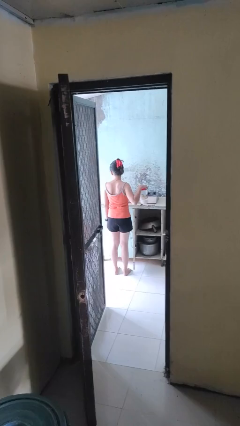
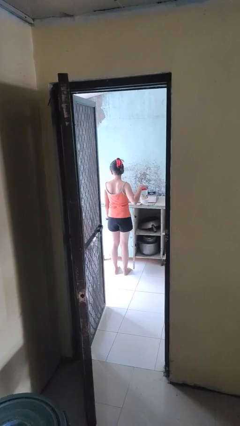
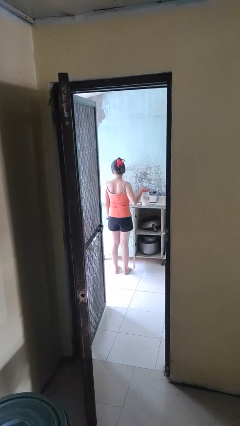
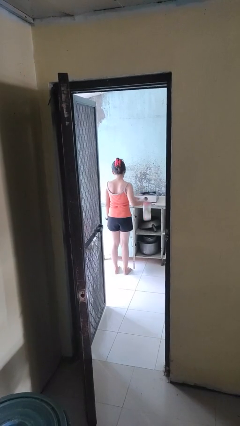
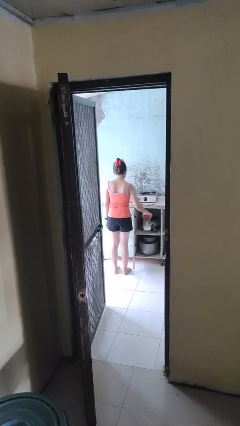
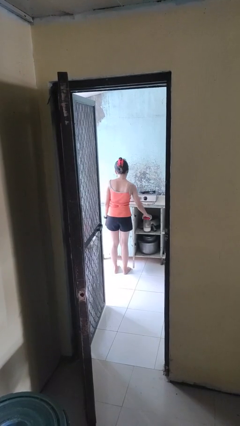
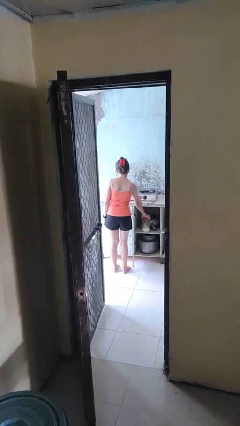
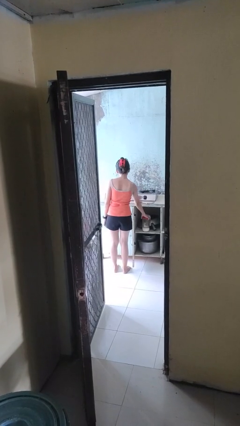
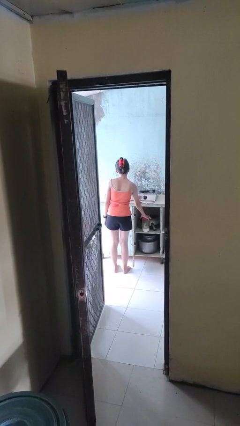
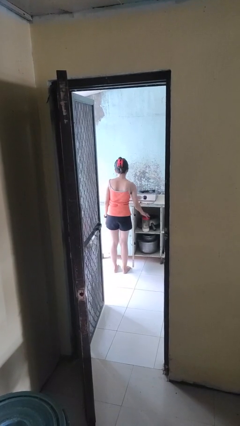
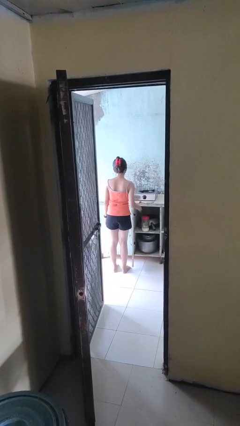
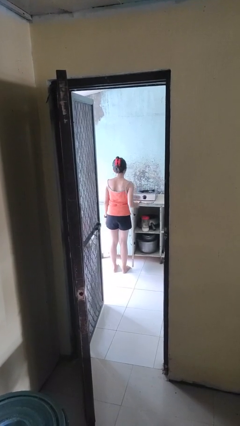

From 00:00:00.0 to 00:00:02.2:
person puts down object into cabinet

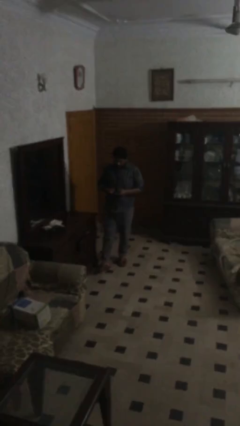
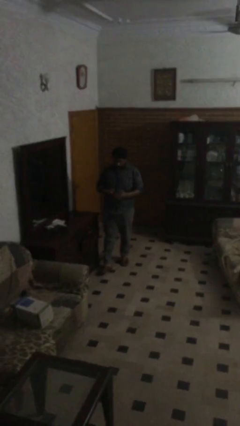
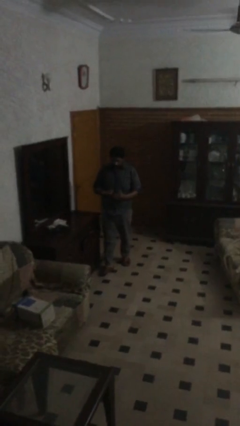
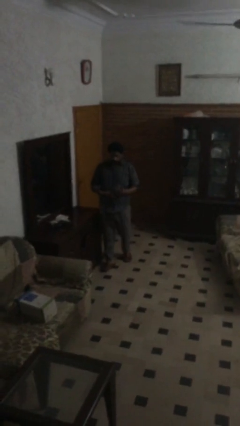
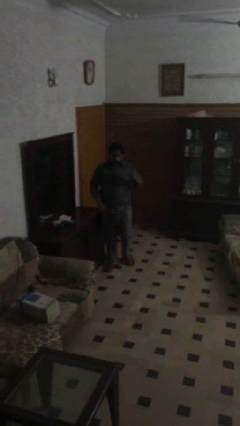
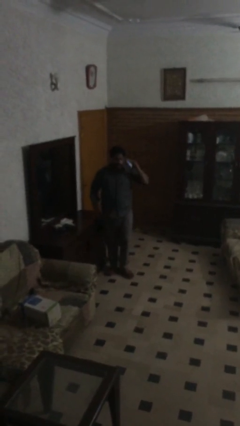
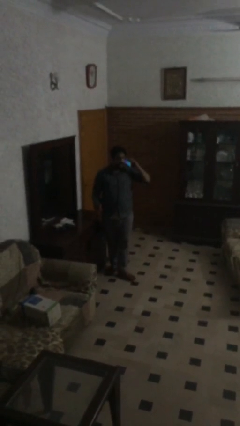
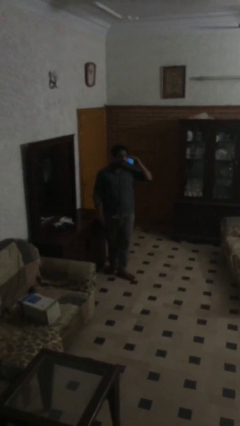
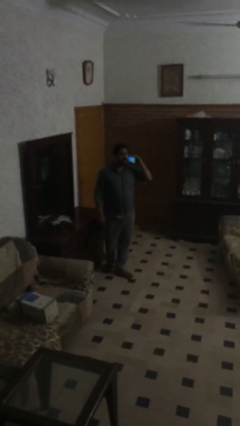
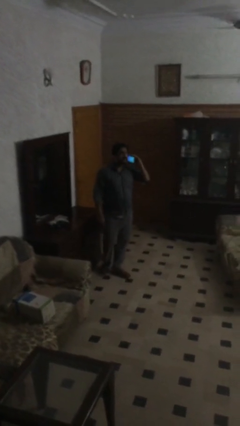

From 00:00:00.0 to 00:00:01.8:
person talks on phone

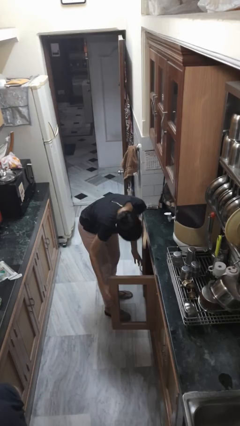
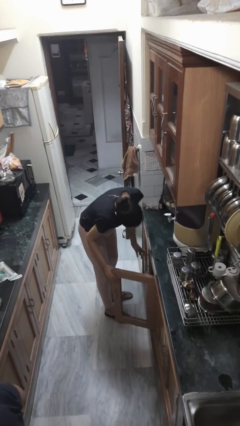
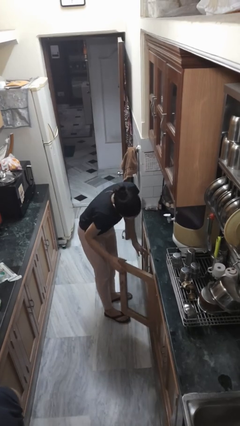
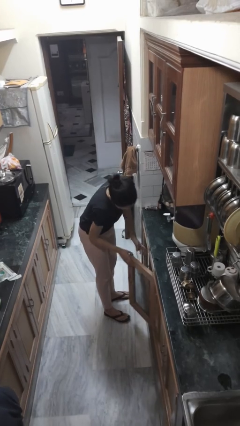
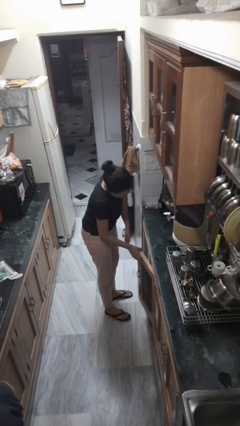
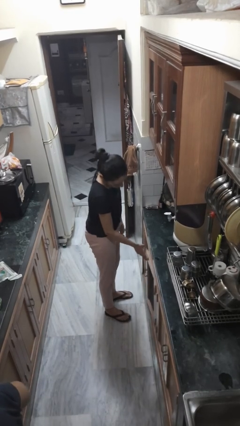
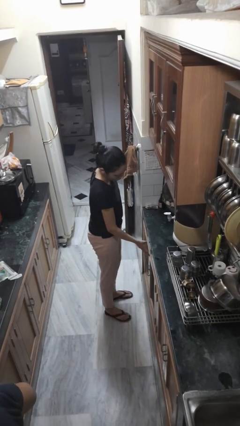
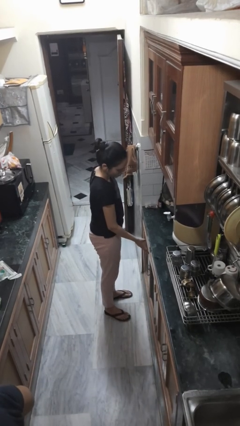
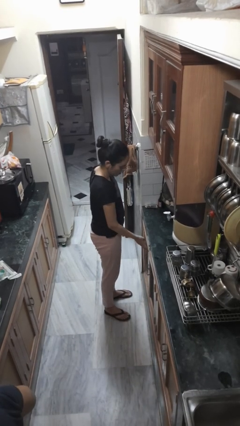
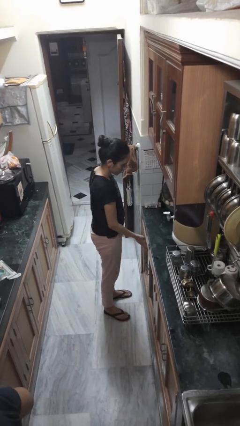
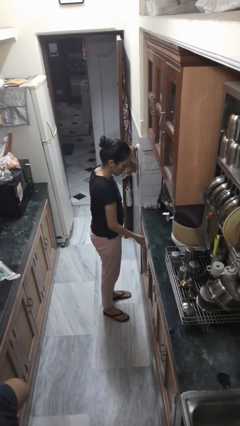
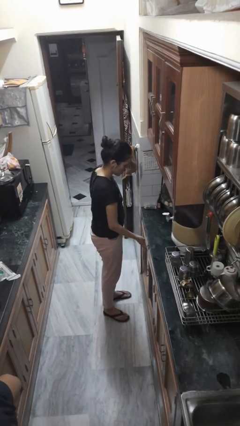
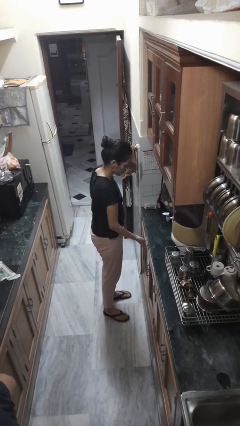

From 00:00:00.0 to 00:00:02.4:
person closes cabinet

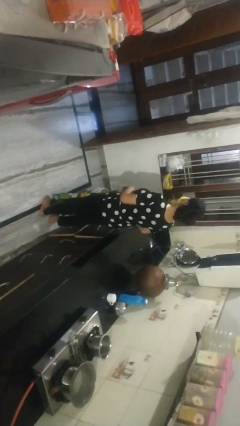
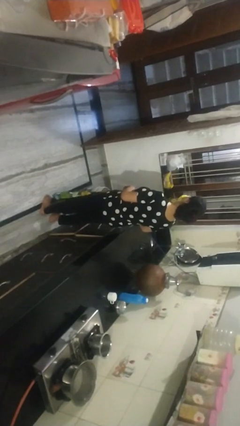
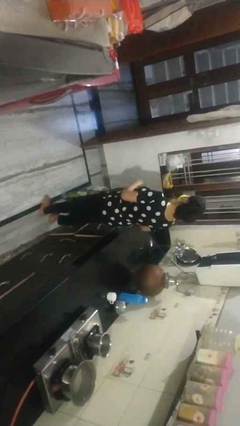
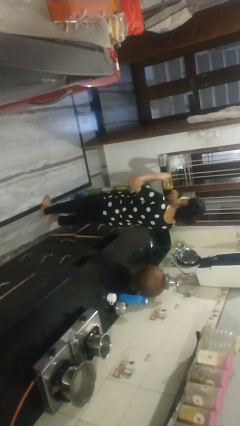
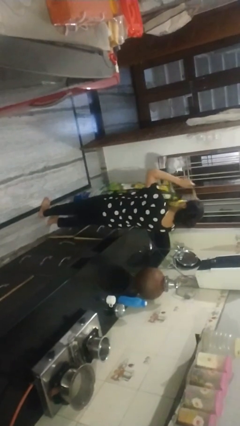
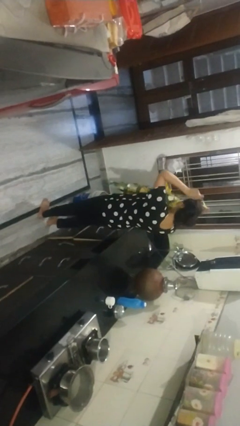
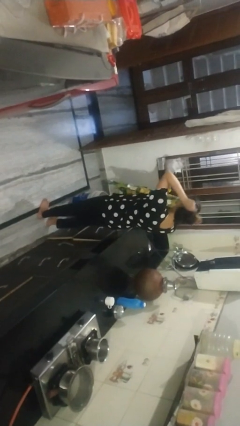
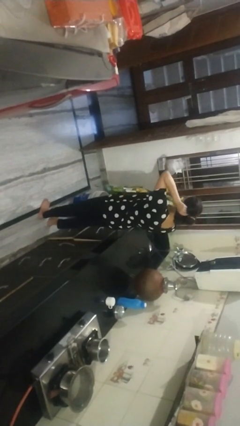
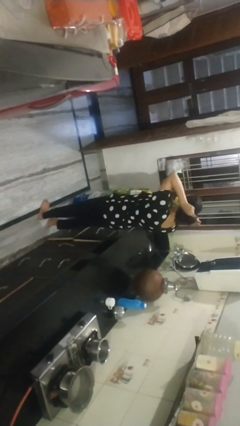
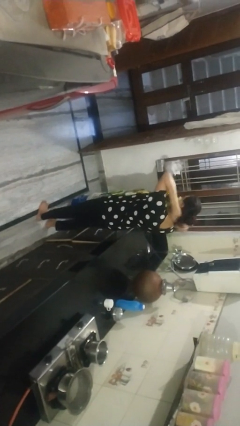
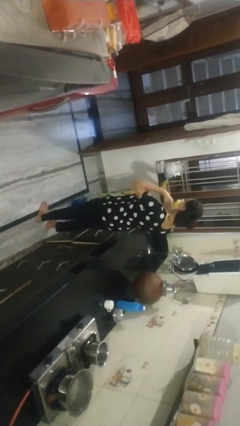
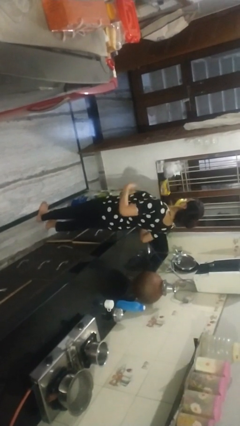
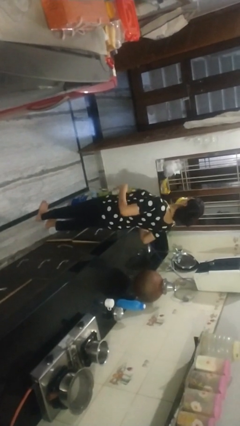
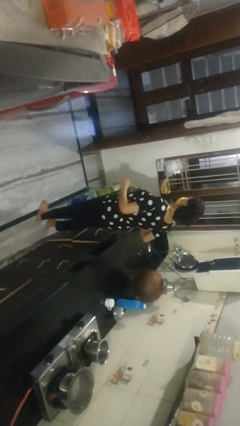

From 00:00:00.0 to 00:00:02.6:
person puts on apron

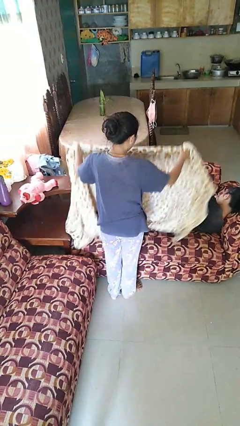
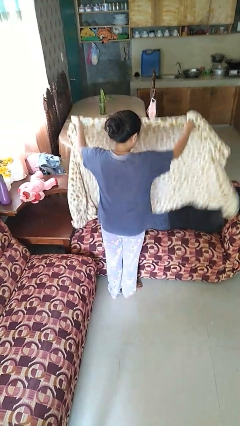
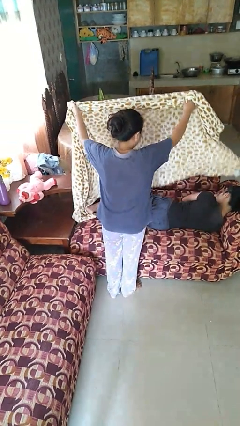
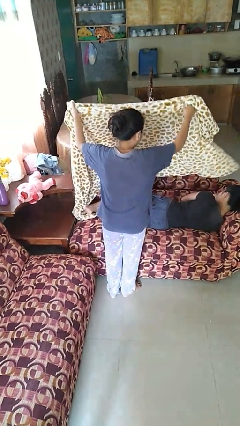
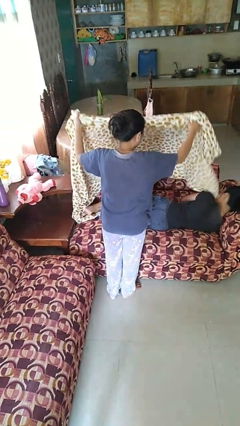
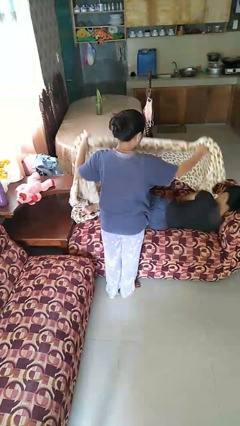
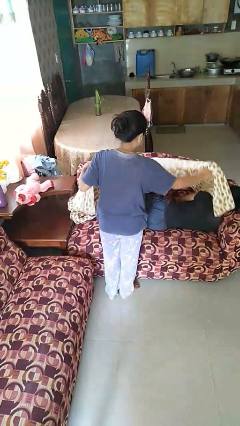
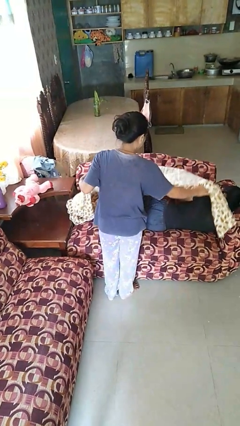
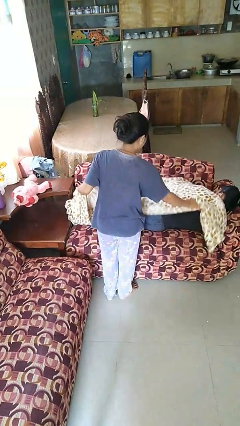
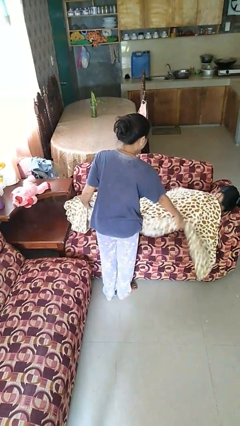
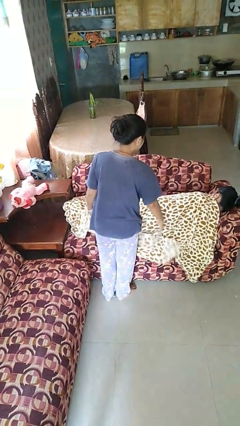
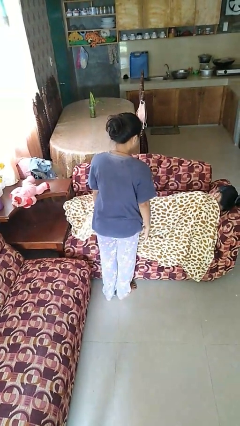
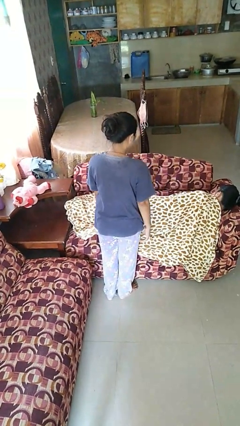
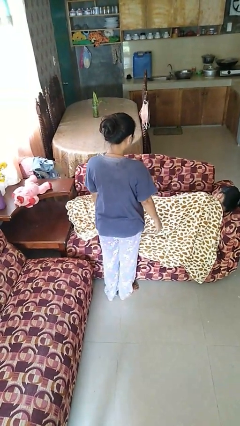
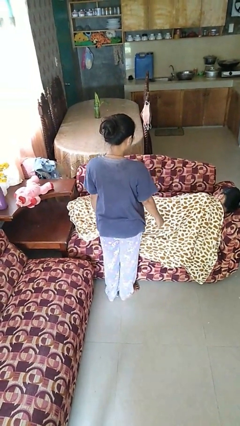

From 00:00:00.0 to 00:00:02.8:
person covers friend with blanket

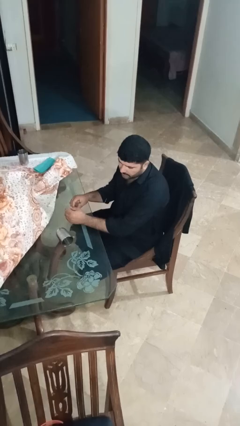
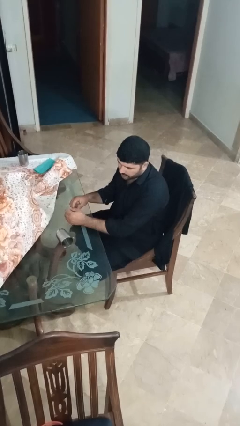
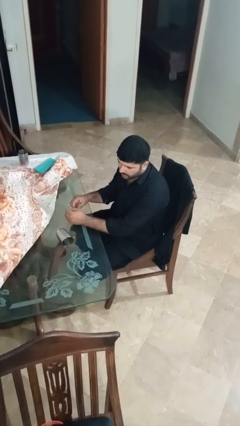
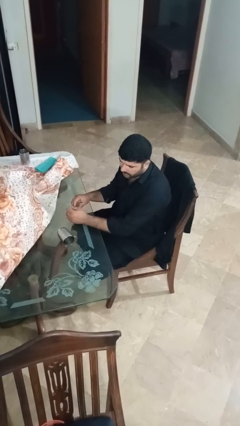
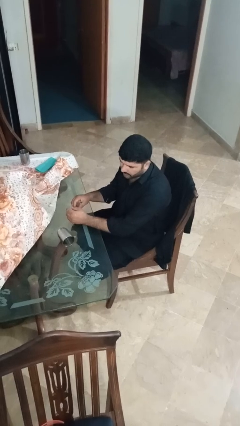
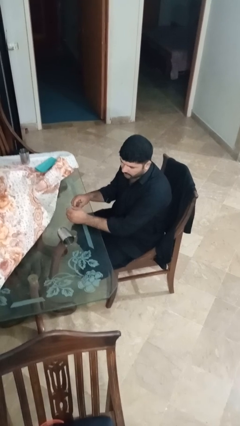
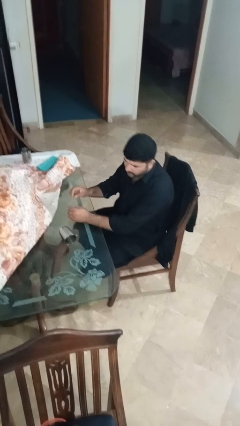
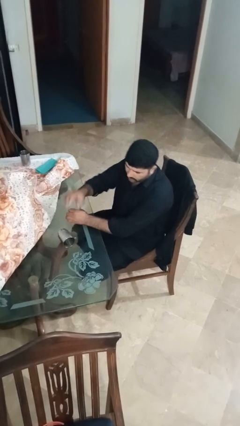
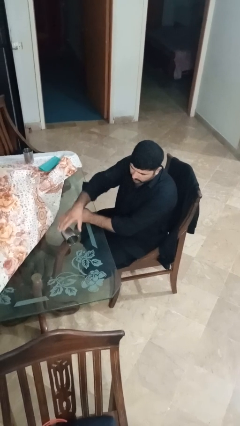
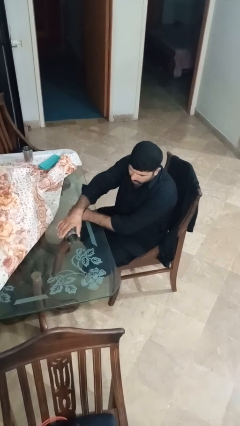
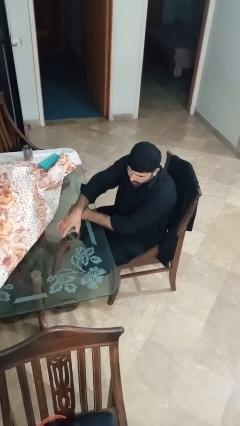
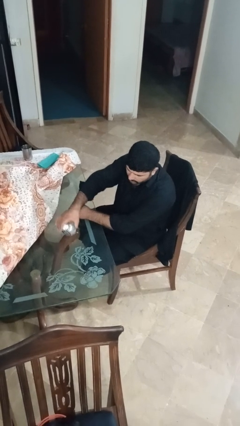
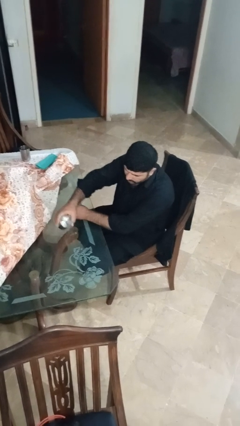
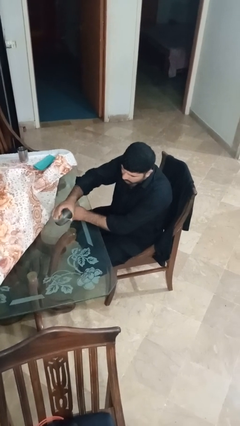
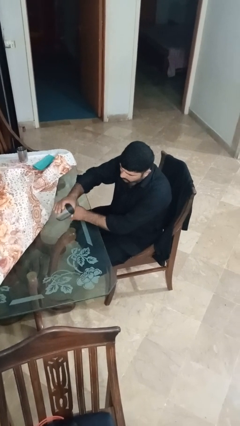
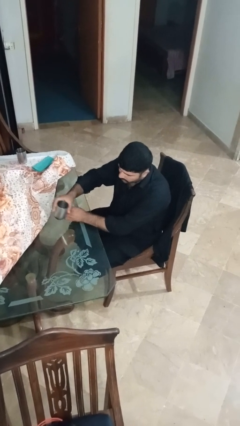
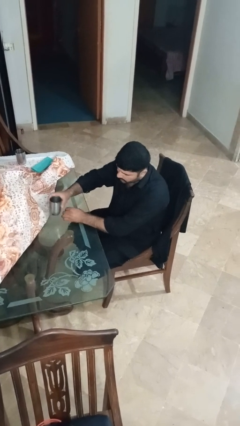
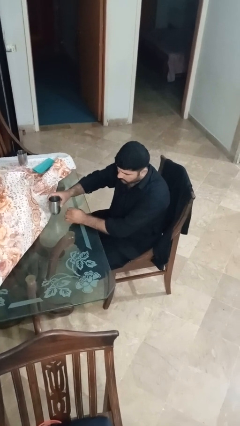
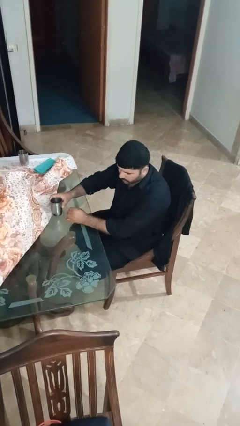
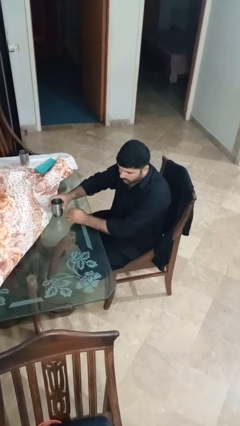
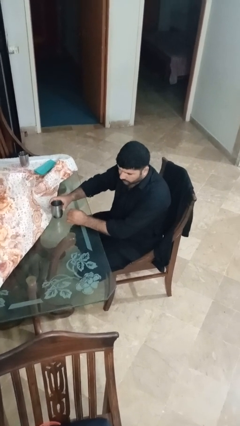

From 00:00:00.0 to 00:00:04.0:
person sets upright glass

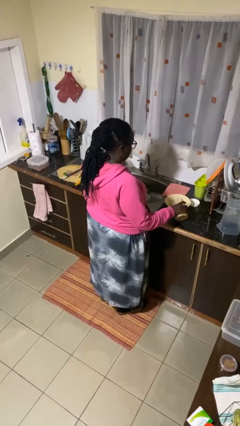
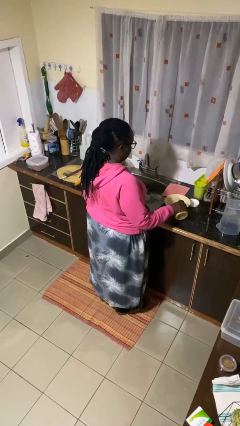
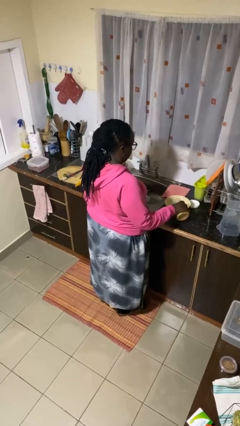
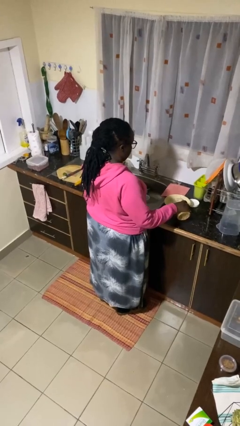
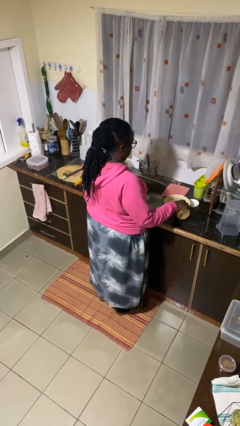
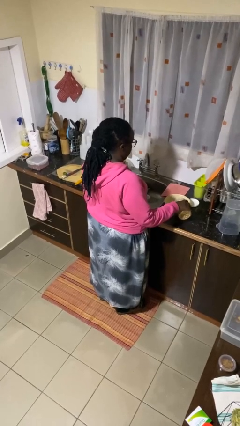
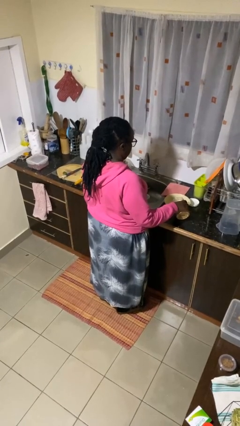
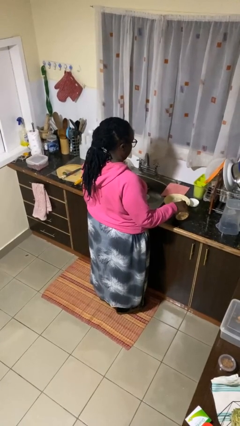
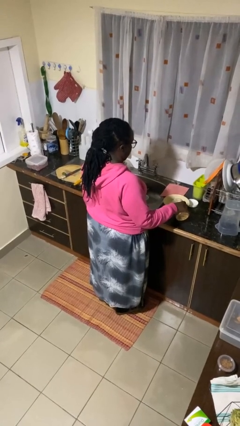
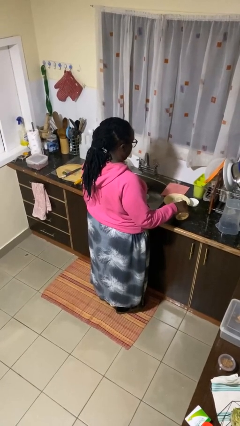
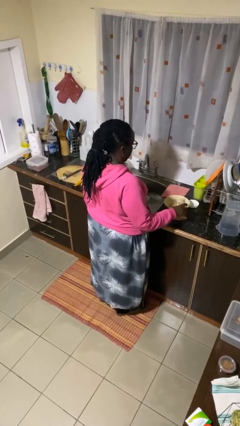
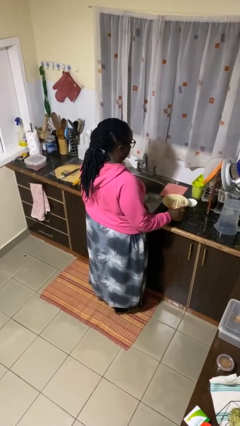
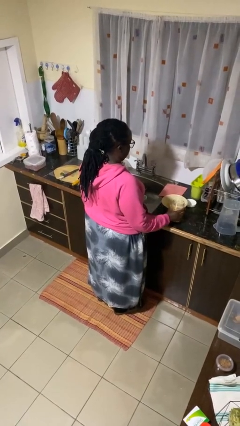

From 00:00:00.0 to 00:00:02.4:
person pours into bowl
